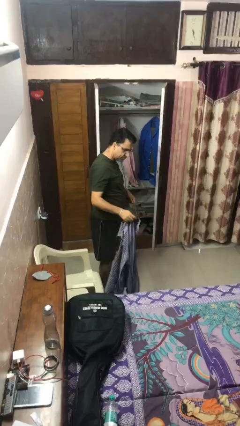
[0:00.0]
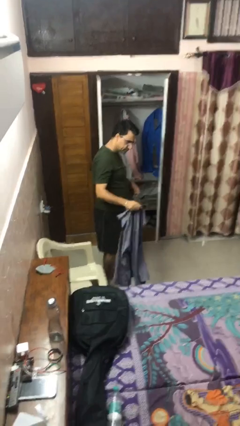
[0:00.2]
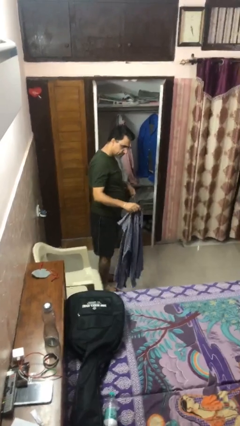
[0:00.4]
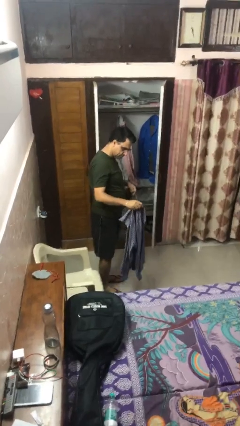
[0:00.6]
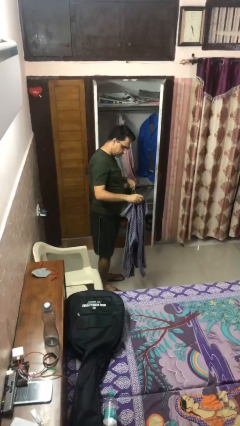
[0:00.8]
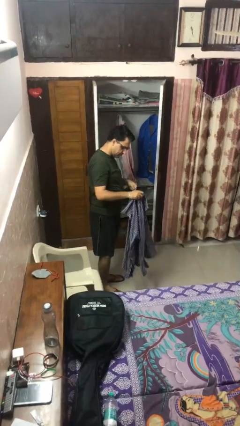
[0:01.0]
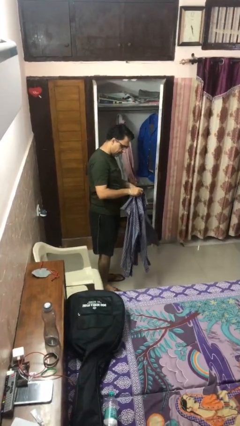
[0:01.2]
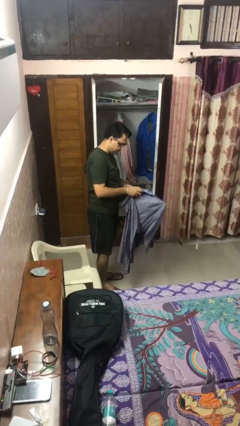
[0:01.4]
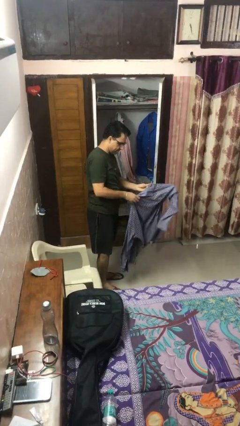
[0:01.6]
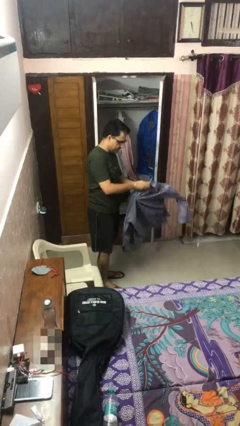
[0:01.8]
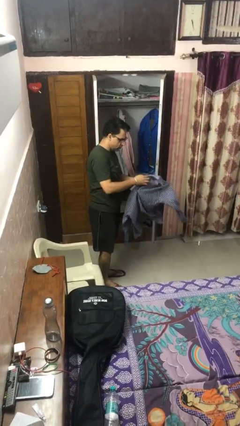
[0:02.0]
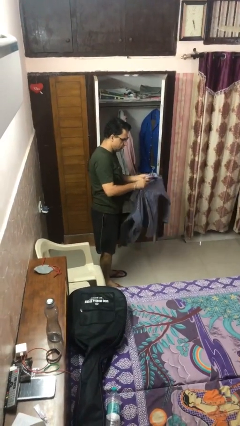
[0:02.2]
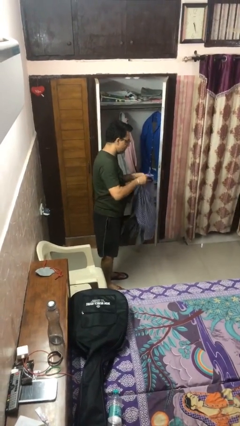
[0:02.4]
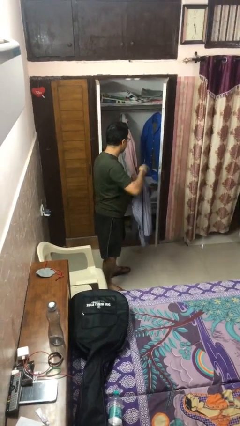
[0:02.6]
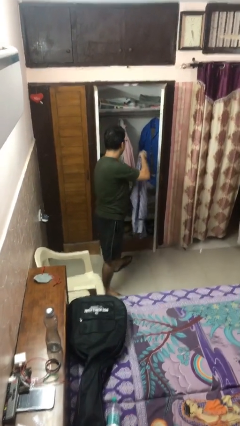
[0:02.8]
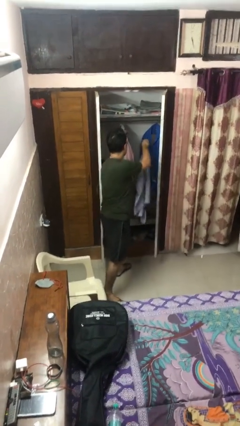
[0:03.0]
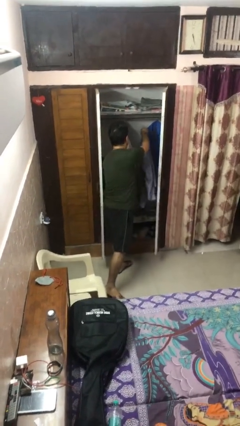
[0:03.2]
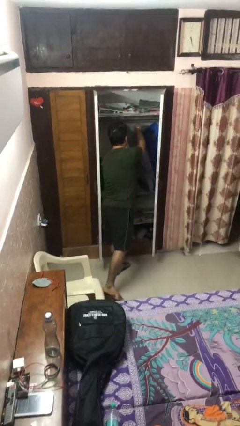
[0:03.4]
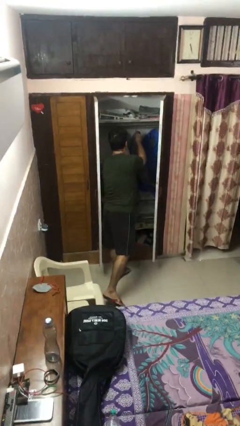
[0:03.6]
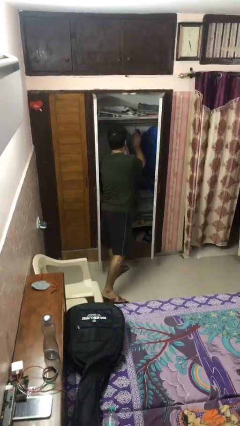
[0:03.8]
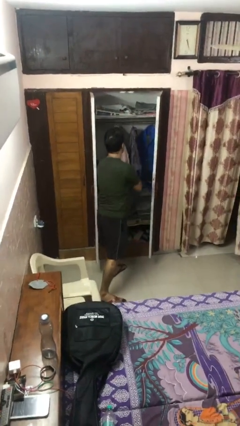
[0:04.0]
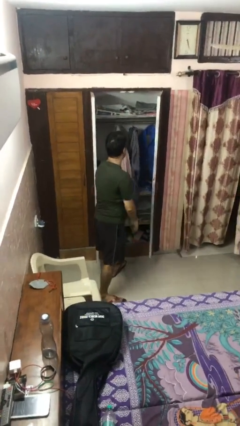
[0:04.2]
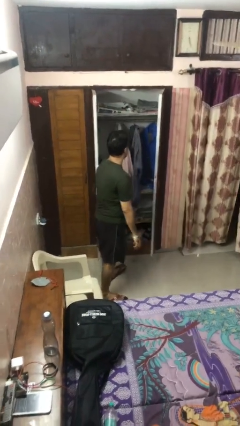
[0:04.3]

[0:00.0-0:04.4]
person puts clothes into closet

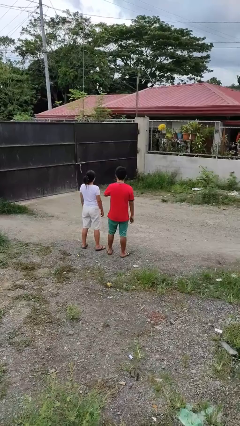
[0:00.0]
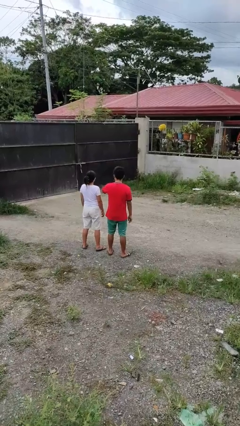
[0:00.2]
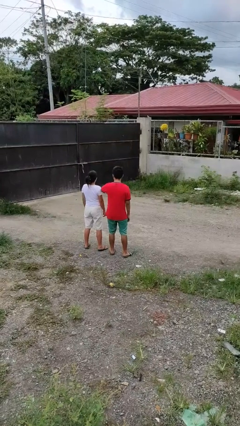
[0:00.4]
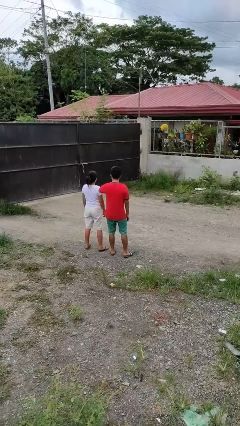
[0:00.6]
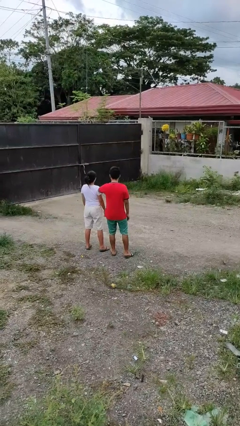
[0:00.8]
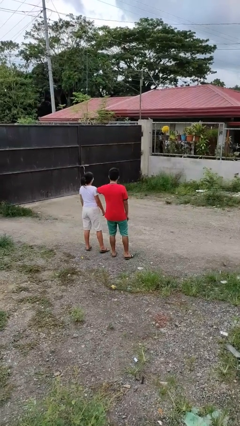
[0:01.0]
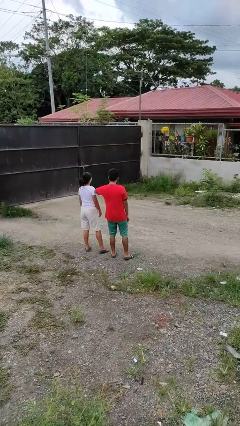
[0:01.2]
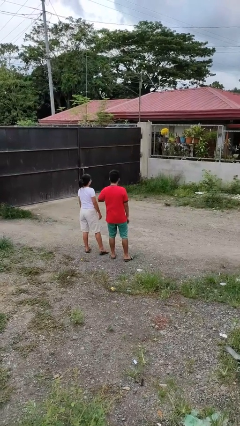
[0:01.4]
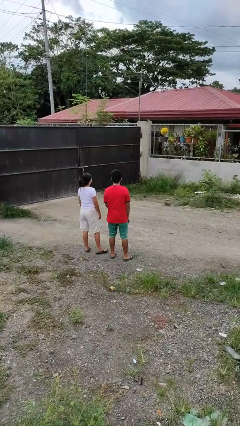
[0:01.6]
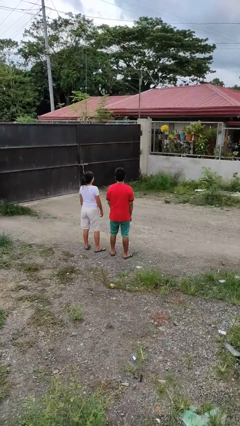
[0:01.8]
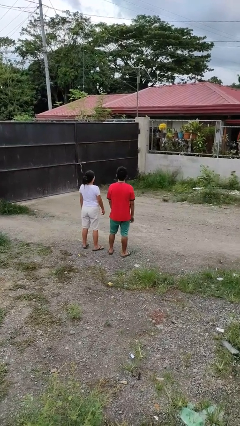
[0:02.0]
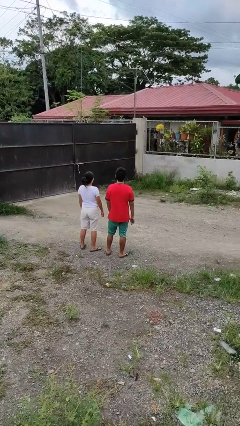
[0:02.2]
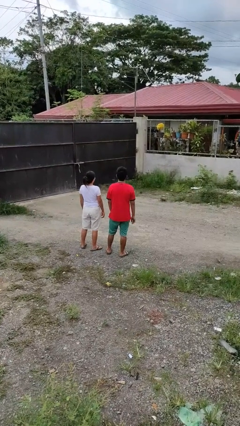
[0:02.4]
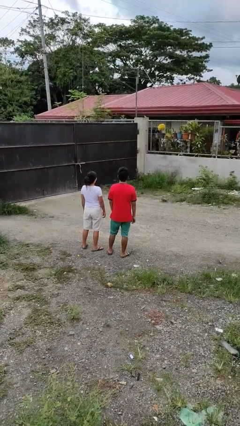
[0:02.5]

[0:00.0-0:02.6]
person nudges person with elbow

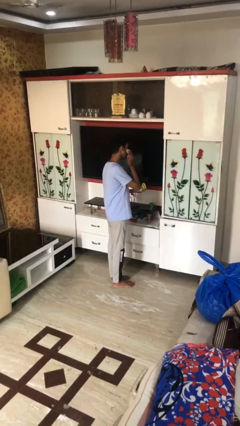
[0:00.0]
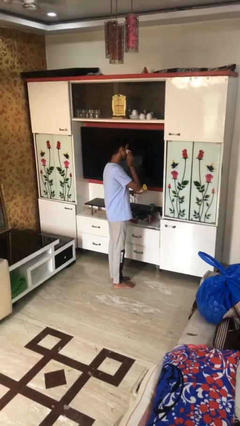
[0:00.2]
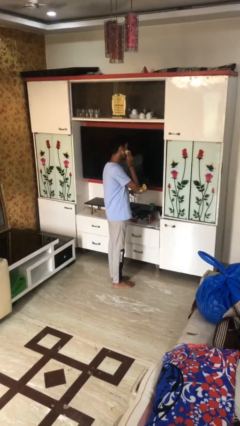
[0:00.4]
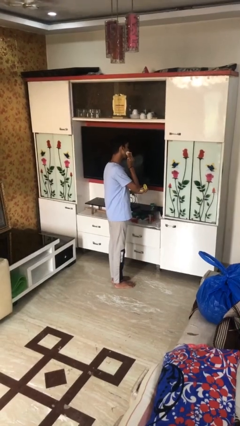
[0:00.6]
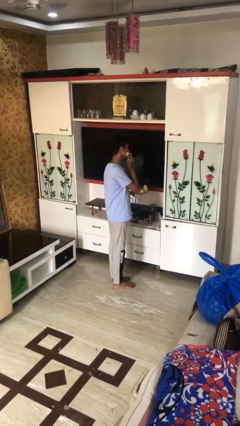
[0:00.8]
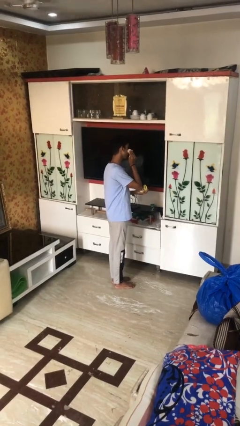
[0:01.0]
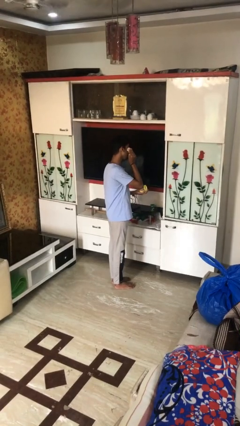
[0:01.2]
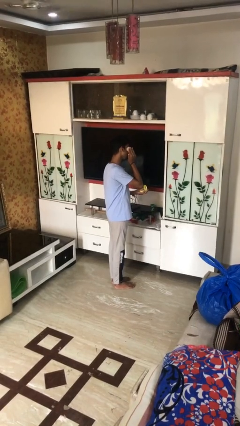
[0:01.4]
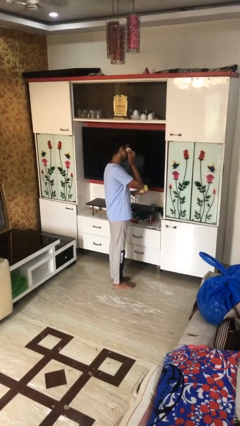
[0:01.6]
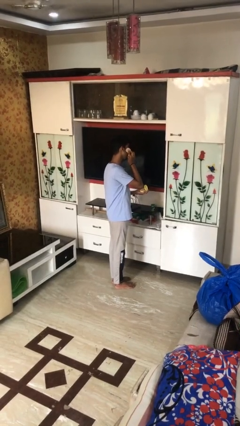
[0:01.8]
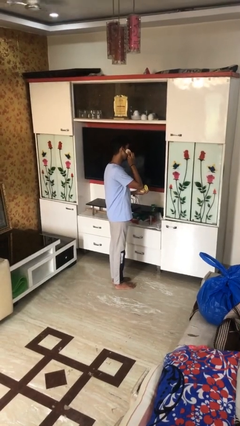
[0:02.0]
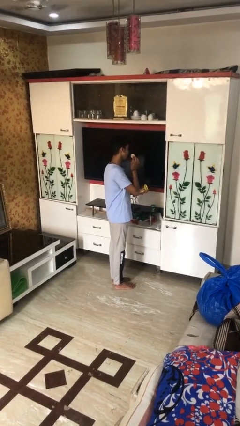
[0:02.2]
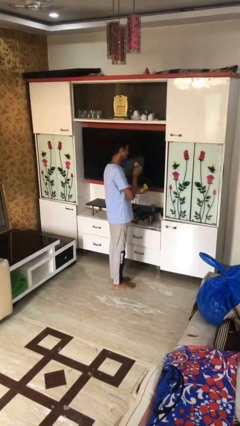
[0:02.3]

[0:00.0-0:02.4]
person applies foundation makeup

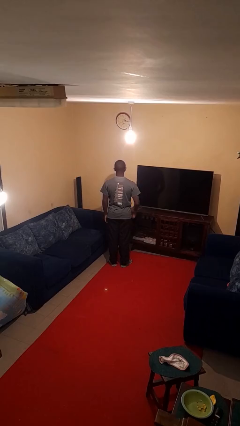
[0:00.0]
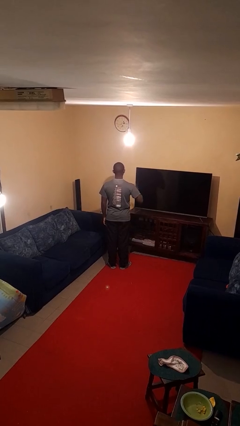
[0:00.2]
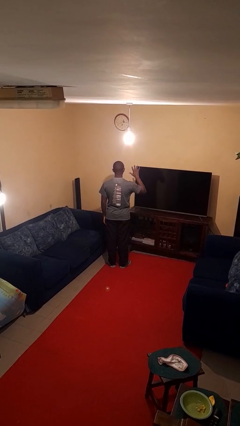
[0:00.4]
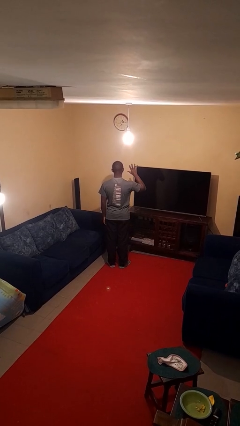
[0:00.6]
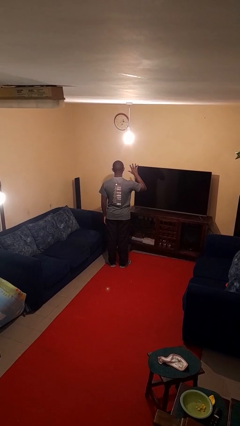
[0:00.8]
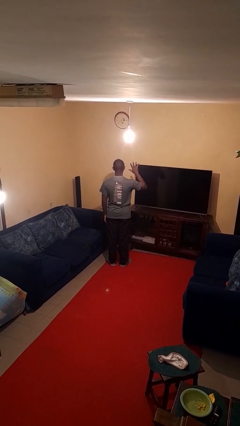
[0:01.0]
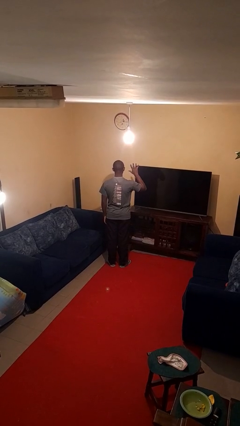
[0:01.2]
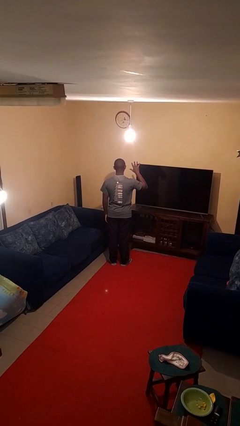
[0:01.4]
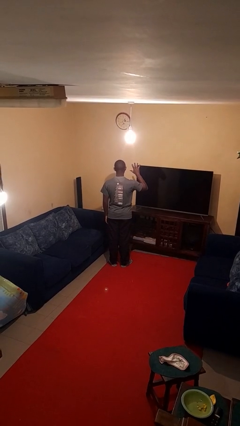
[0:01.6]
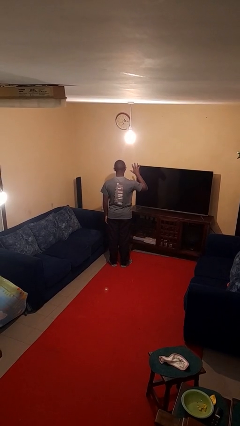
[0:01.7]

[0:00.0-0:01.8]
person gestures number five

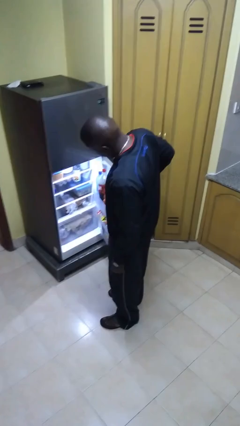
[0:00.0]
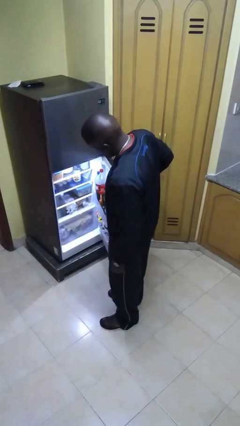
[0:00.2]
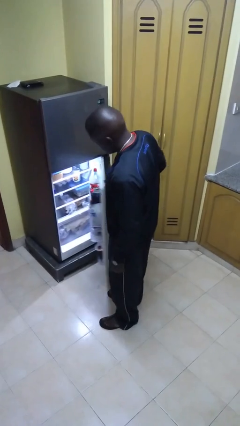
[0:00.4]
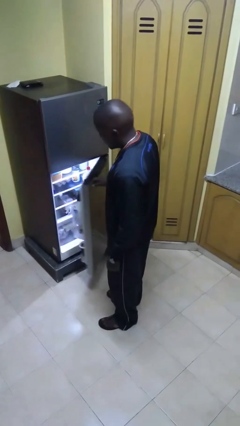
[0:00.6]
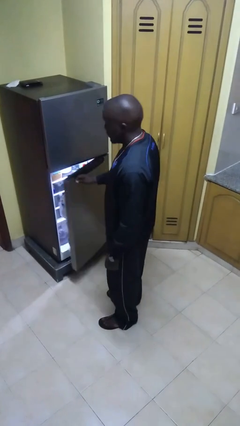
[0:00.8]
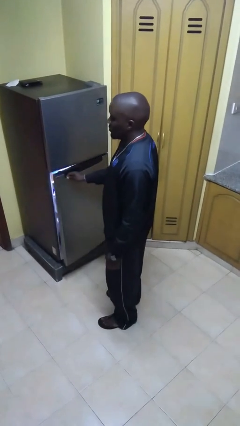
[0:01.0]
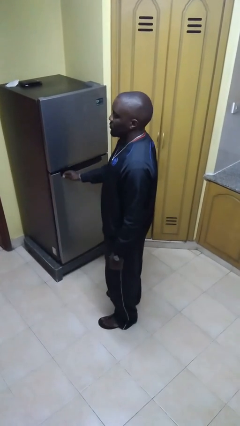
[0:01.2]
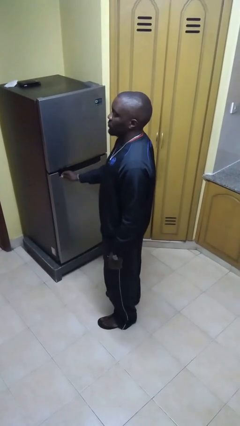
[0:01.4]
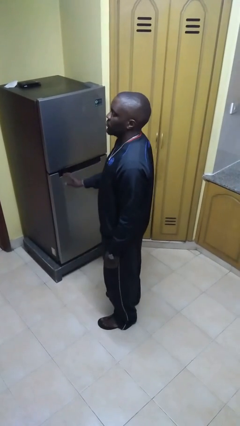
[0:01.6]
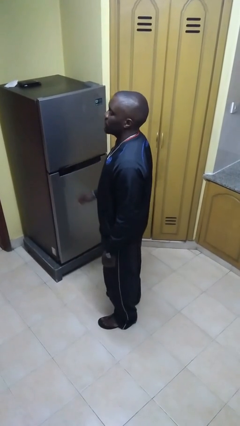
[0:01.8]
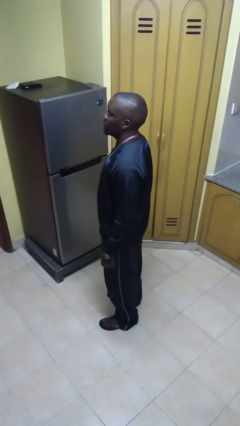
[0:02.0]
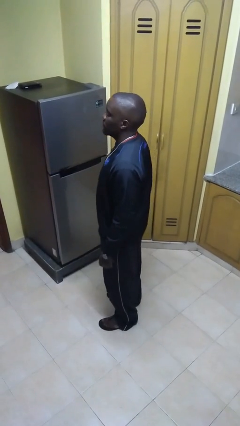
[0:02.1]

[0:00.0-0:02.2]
person dries hands with towel

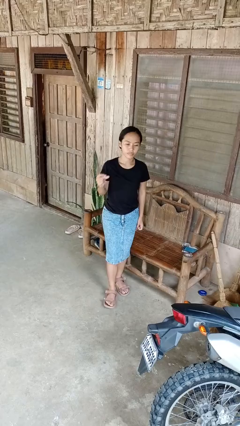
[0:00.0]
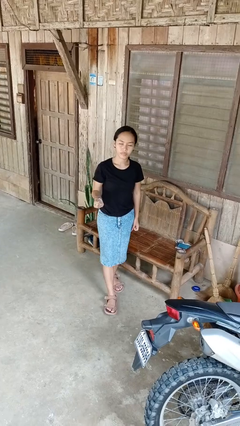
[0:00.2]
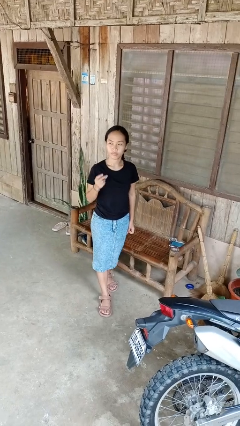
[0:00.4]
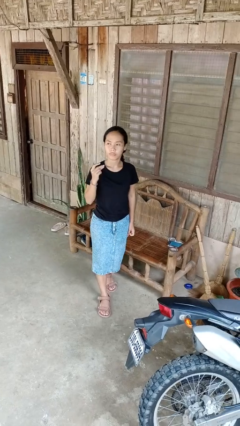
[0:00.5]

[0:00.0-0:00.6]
person snaps fingers

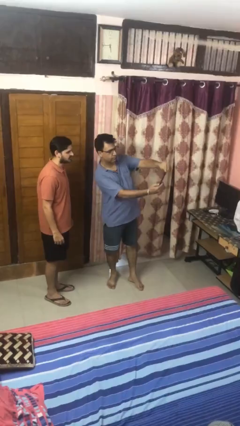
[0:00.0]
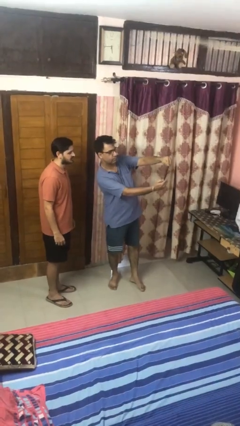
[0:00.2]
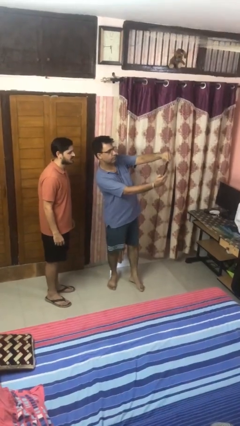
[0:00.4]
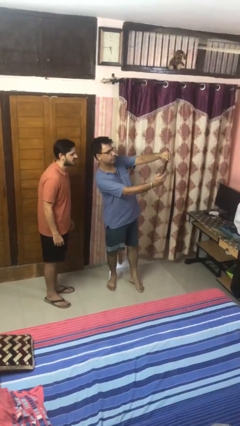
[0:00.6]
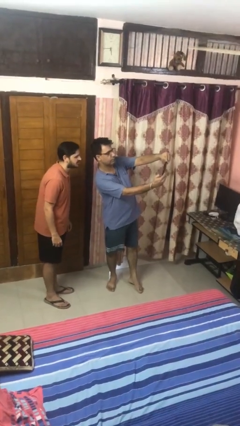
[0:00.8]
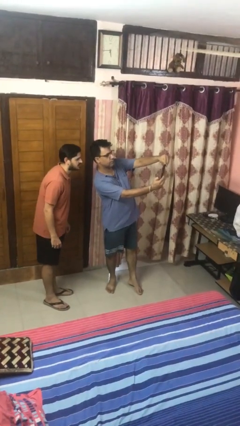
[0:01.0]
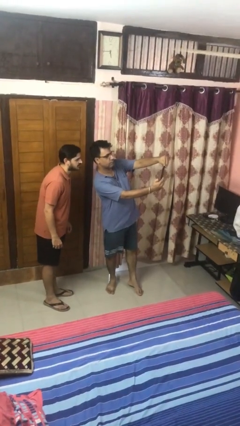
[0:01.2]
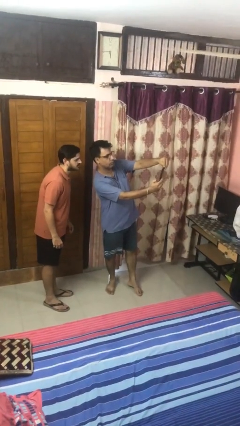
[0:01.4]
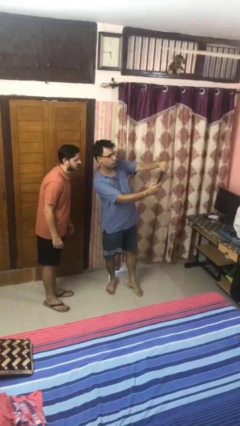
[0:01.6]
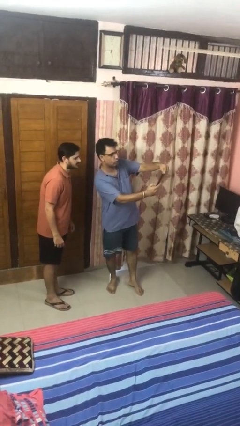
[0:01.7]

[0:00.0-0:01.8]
person takes selfie with person

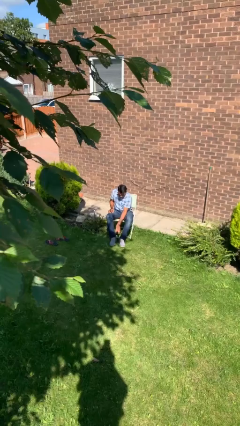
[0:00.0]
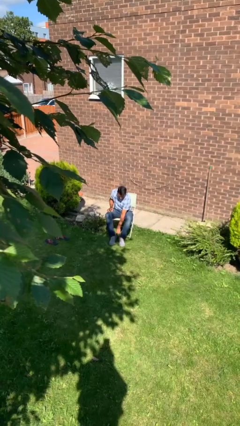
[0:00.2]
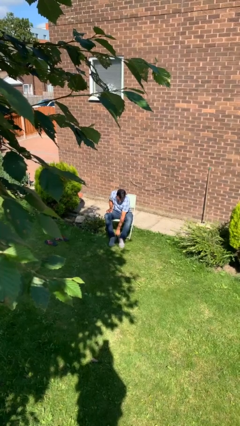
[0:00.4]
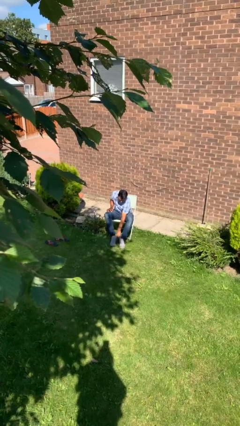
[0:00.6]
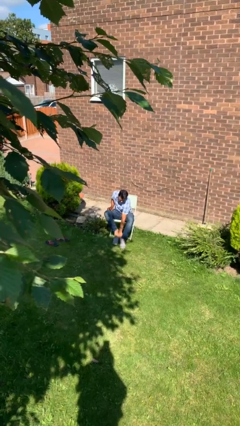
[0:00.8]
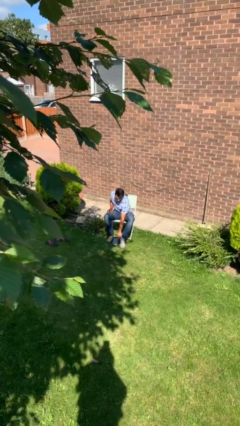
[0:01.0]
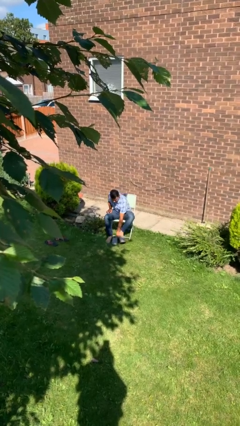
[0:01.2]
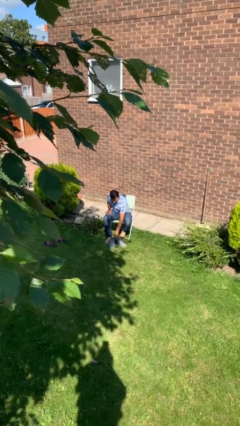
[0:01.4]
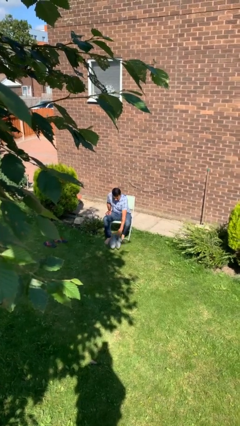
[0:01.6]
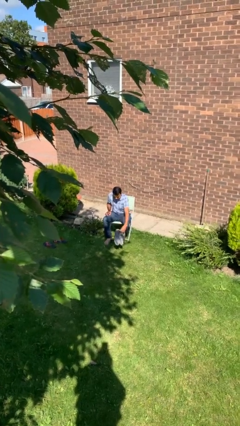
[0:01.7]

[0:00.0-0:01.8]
person takes off shoes
